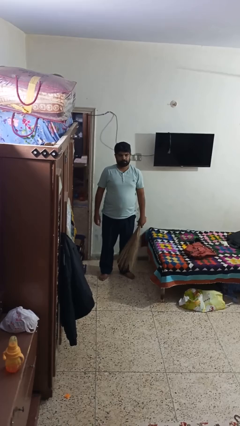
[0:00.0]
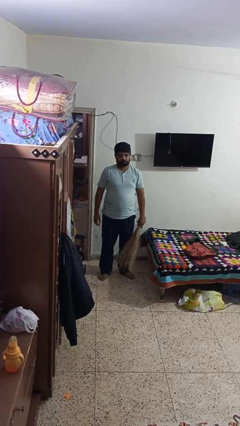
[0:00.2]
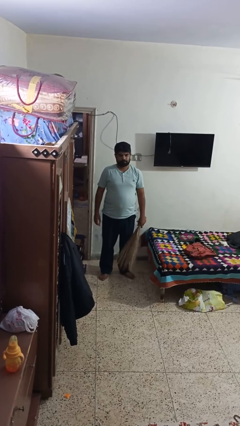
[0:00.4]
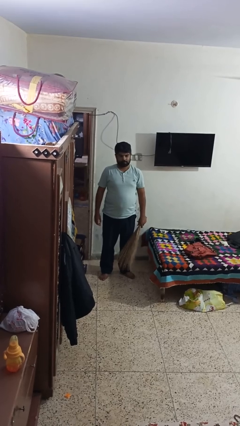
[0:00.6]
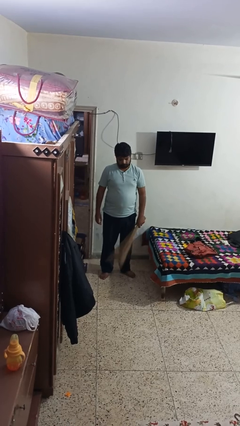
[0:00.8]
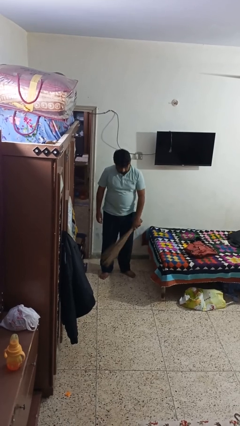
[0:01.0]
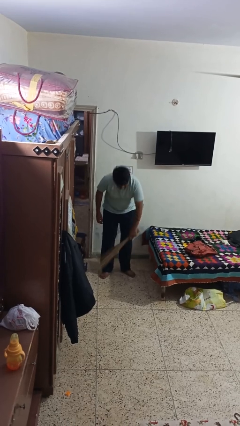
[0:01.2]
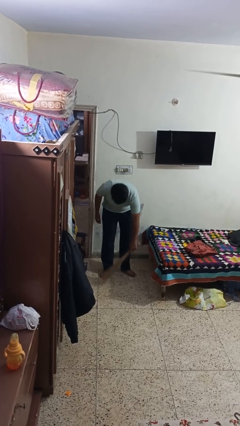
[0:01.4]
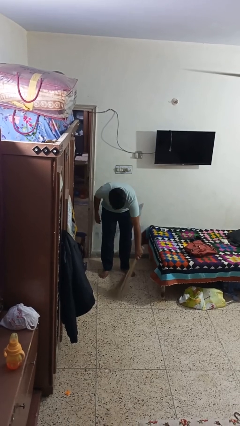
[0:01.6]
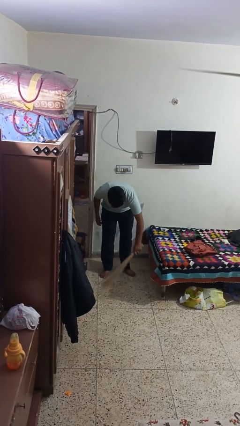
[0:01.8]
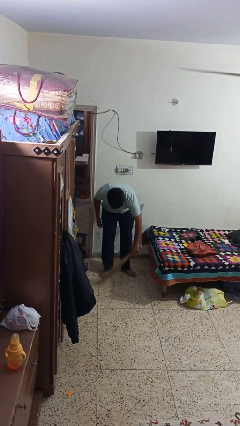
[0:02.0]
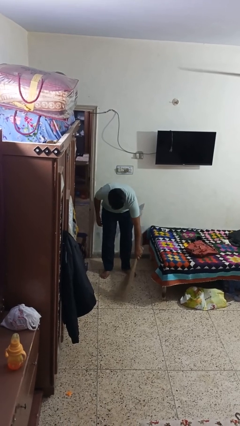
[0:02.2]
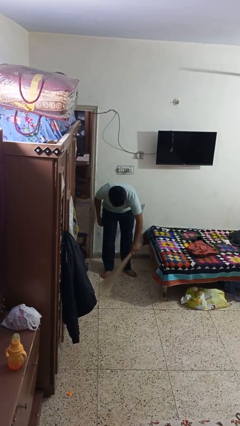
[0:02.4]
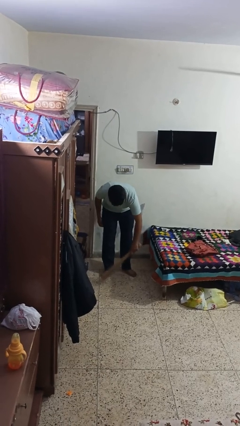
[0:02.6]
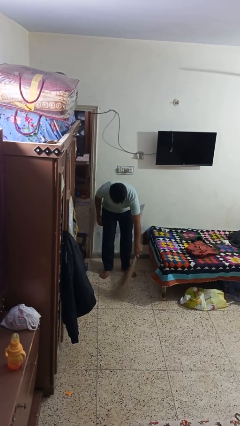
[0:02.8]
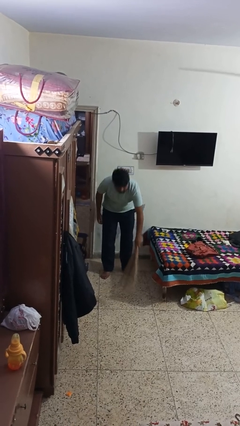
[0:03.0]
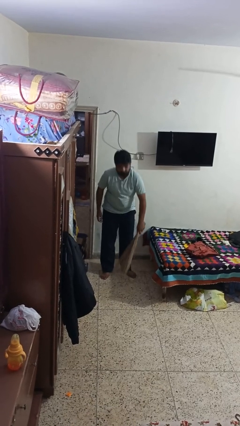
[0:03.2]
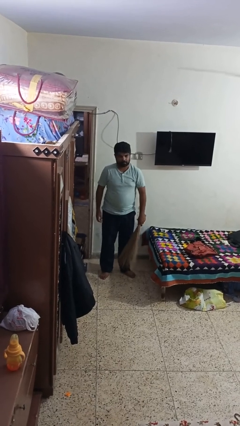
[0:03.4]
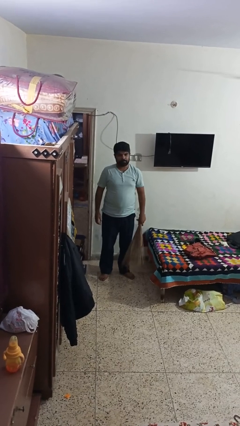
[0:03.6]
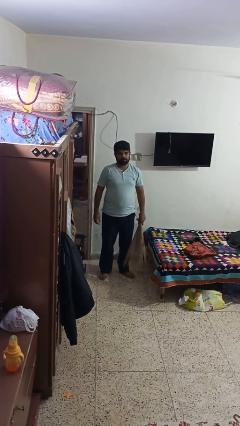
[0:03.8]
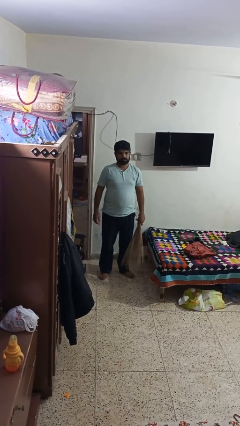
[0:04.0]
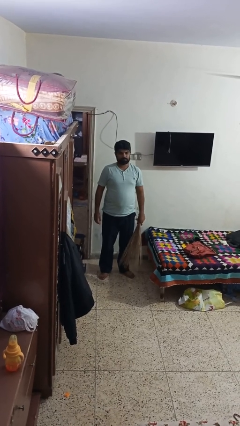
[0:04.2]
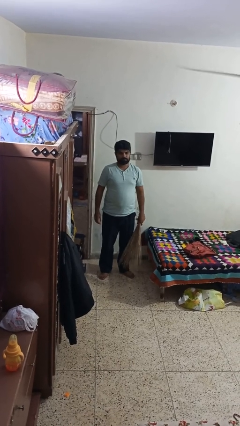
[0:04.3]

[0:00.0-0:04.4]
person sweeps floor

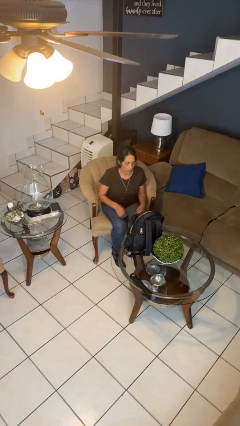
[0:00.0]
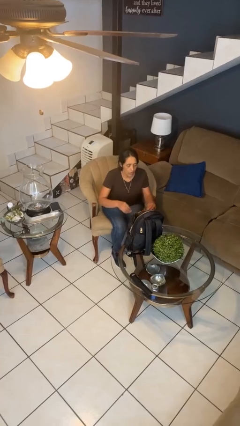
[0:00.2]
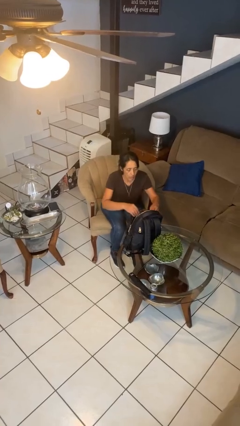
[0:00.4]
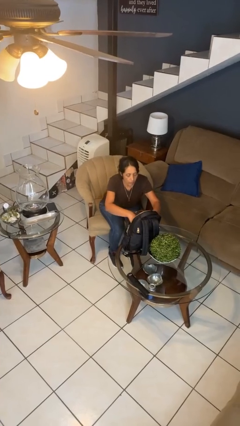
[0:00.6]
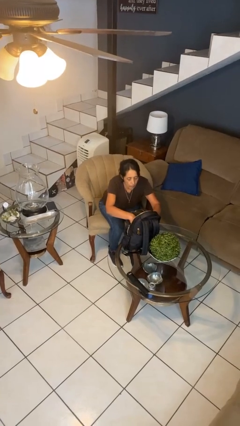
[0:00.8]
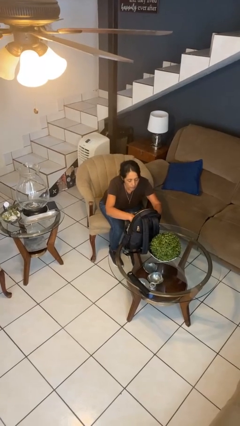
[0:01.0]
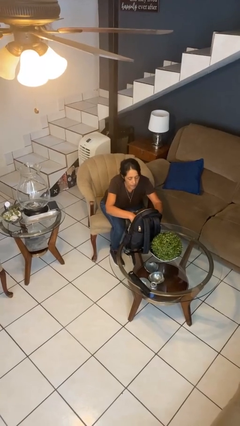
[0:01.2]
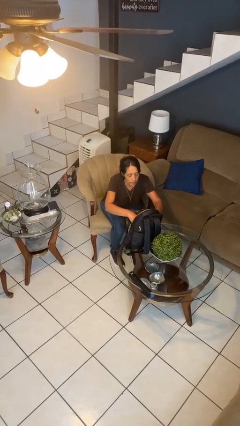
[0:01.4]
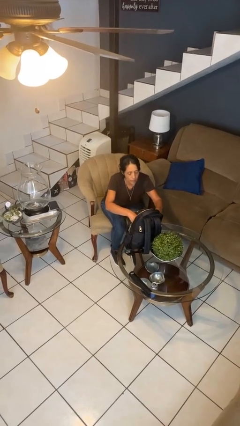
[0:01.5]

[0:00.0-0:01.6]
person searches in backpack

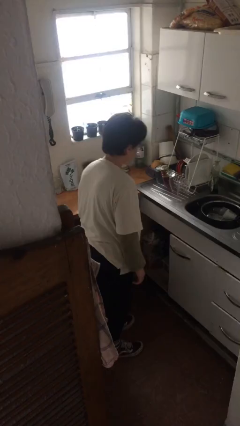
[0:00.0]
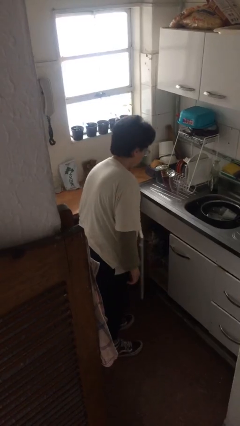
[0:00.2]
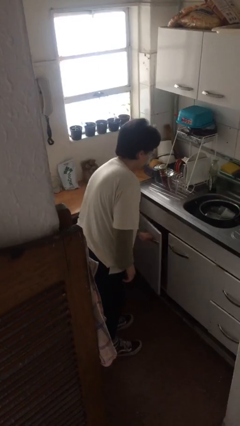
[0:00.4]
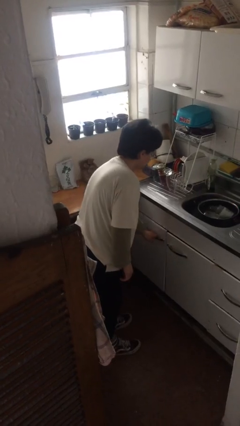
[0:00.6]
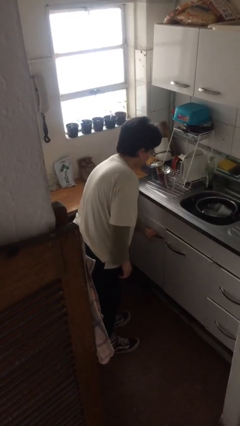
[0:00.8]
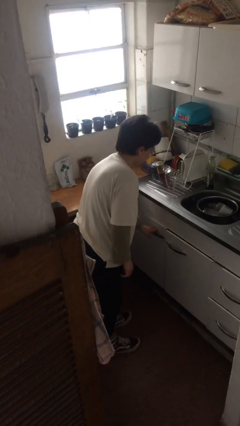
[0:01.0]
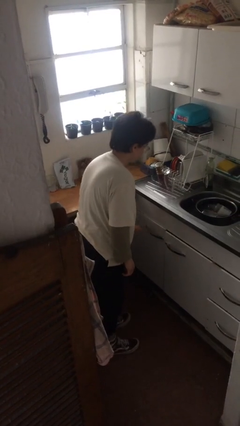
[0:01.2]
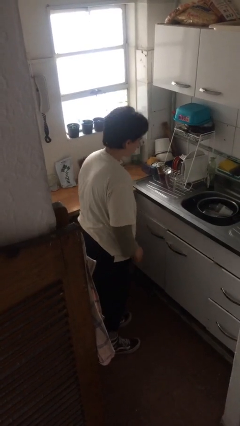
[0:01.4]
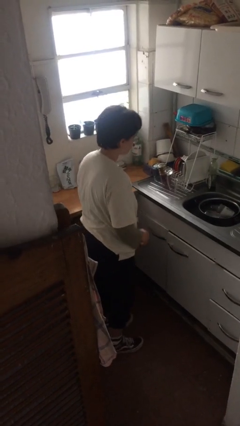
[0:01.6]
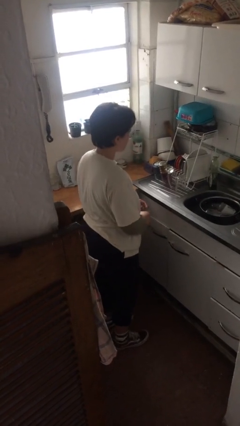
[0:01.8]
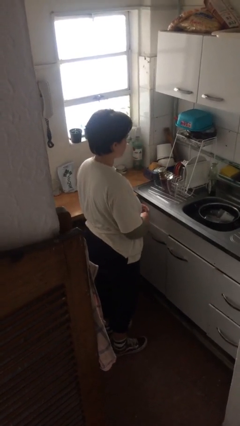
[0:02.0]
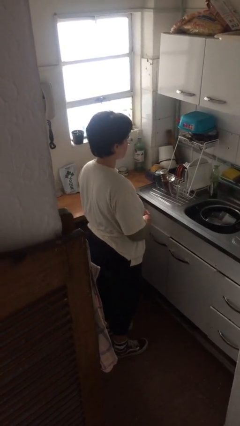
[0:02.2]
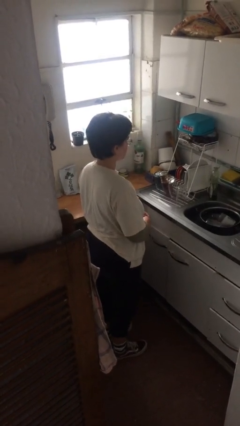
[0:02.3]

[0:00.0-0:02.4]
person closes cabinet

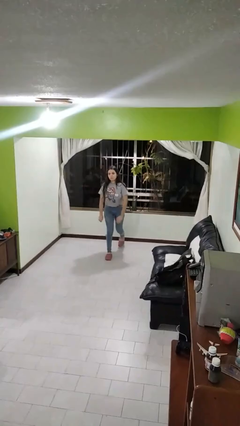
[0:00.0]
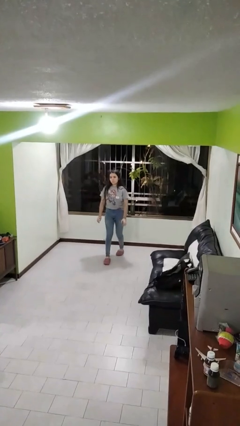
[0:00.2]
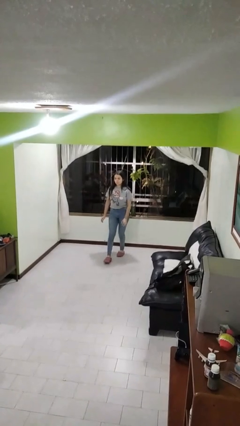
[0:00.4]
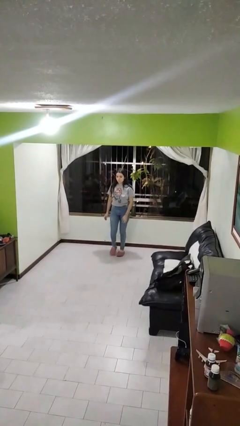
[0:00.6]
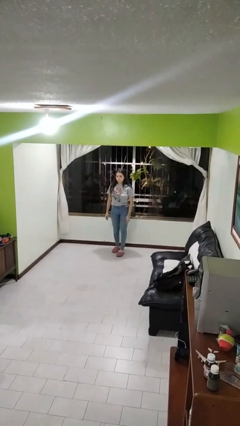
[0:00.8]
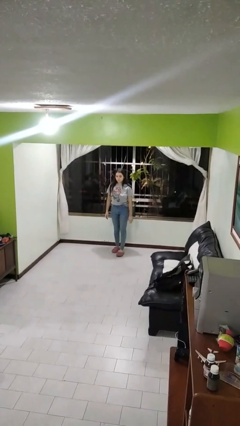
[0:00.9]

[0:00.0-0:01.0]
person stands up from floor

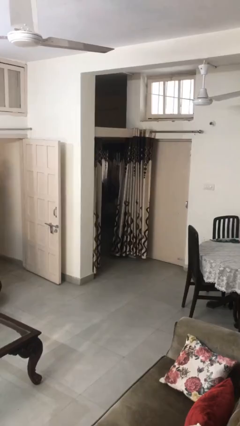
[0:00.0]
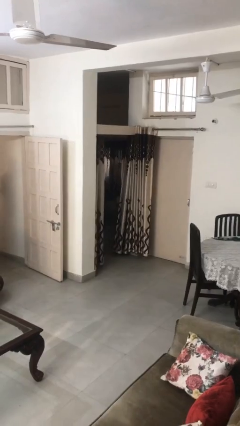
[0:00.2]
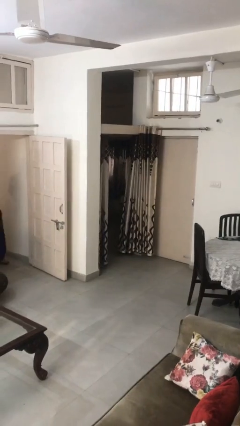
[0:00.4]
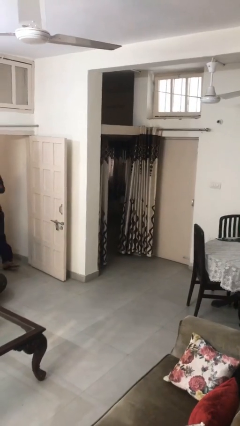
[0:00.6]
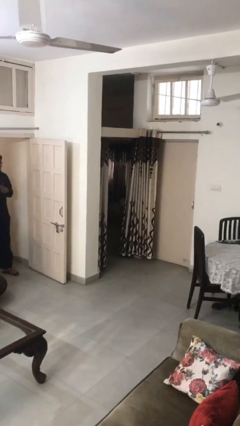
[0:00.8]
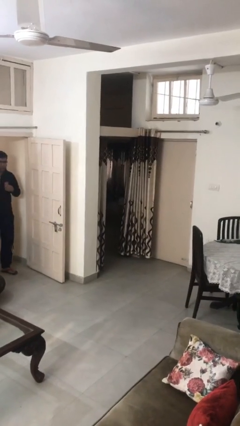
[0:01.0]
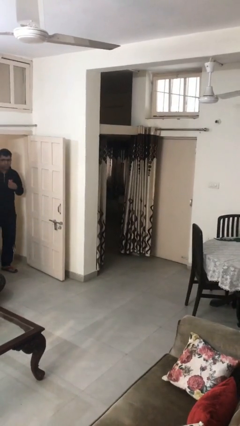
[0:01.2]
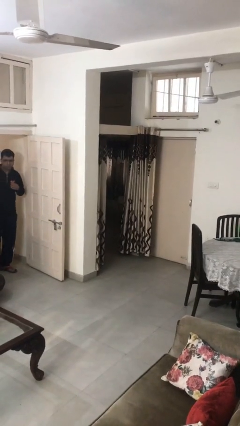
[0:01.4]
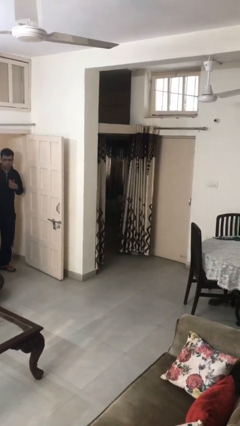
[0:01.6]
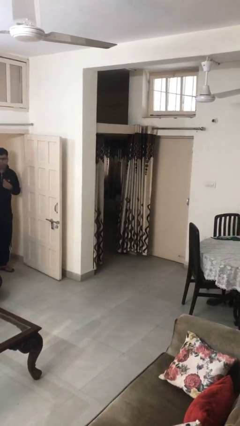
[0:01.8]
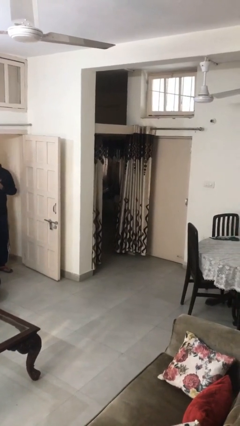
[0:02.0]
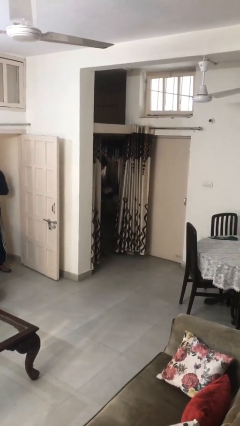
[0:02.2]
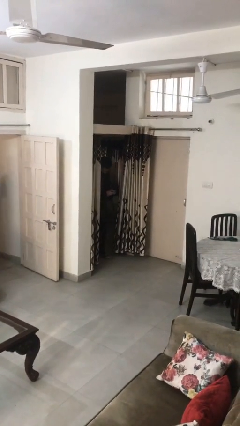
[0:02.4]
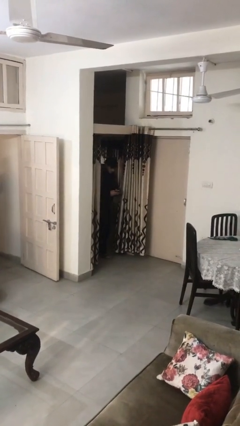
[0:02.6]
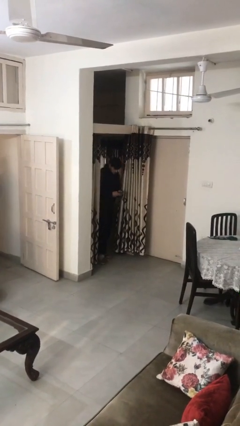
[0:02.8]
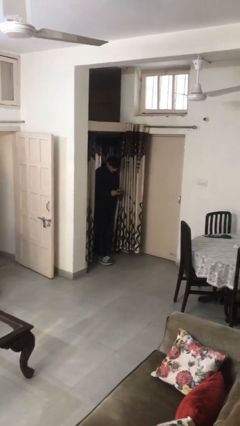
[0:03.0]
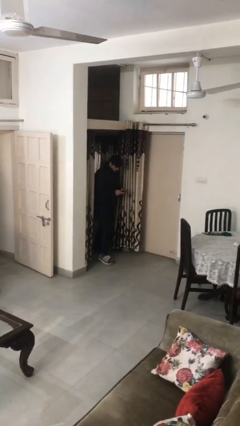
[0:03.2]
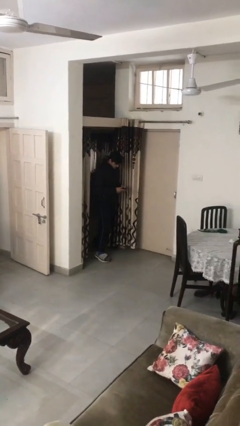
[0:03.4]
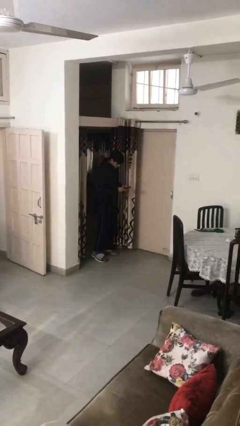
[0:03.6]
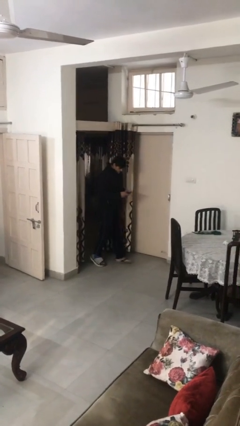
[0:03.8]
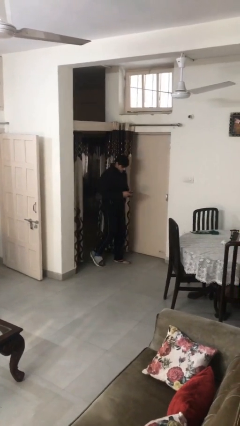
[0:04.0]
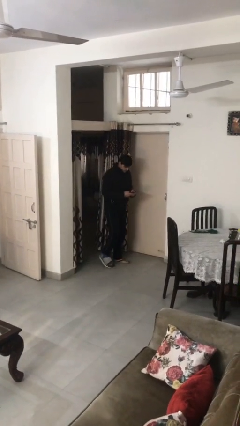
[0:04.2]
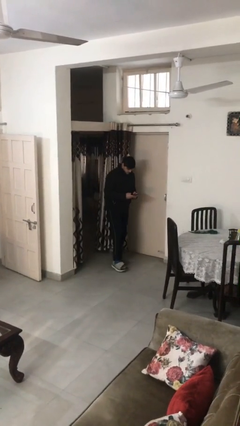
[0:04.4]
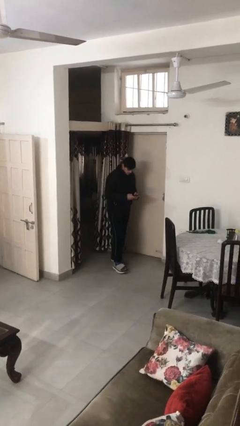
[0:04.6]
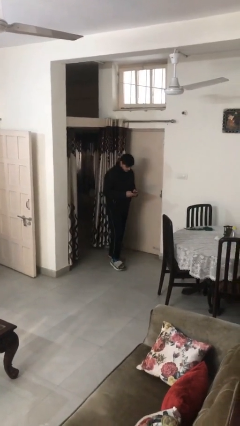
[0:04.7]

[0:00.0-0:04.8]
person enters scene through structure

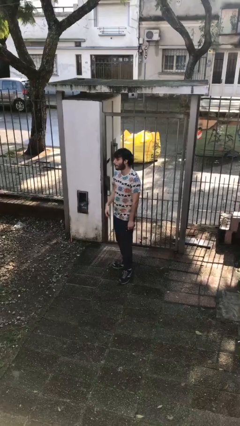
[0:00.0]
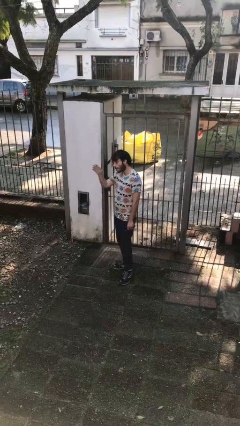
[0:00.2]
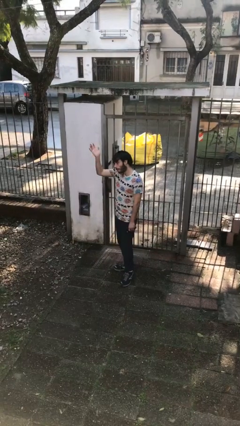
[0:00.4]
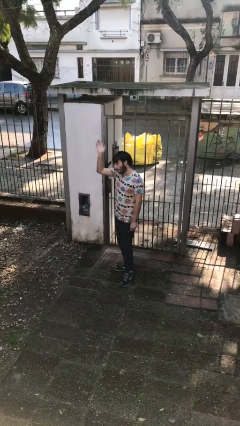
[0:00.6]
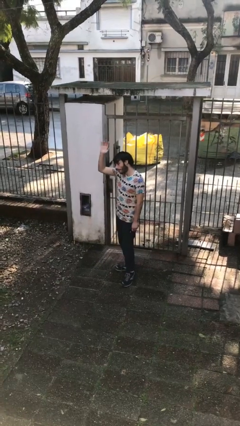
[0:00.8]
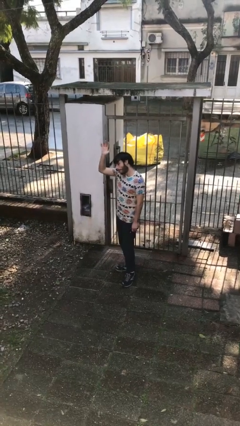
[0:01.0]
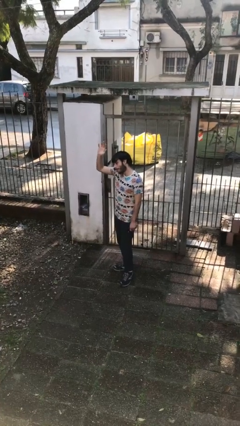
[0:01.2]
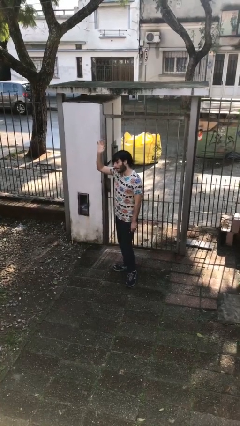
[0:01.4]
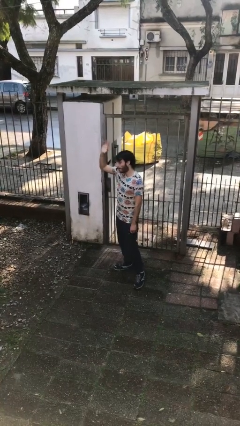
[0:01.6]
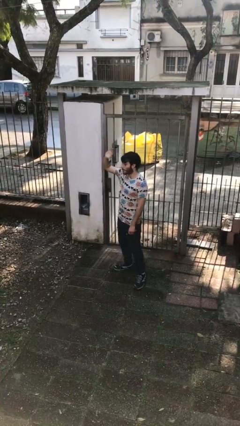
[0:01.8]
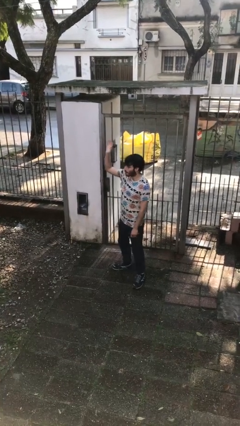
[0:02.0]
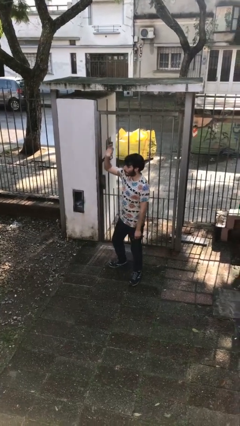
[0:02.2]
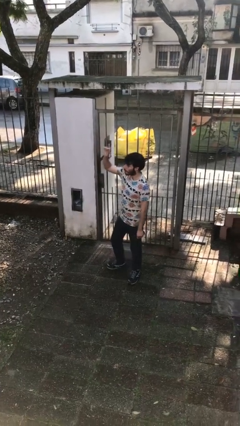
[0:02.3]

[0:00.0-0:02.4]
person waves at person

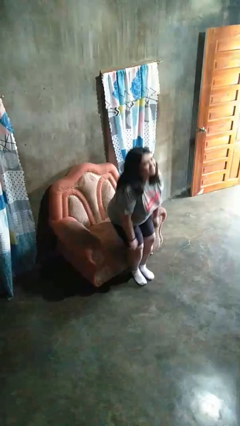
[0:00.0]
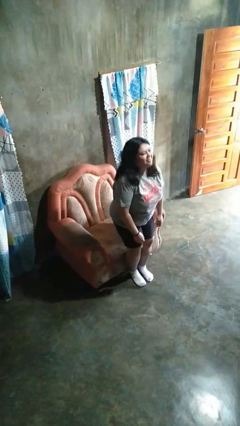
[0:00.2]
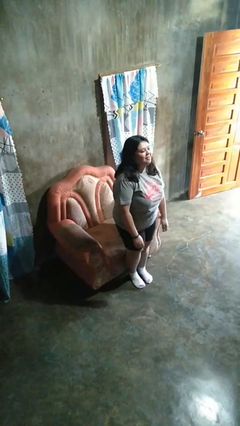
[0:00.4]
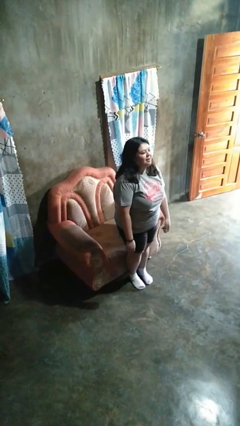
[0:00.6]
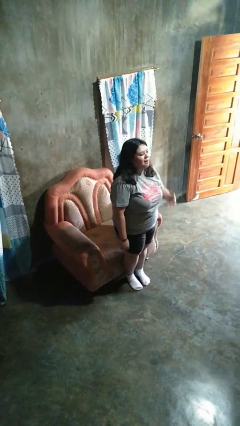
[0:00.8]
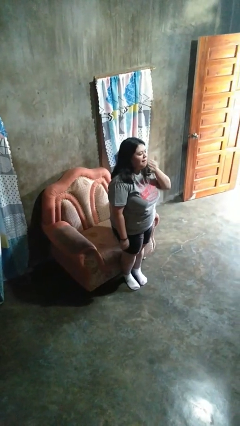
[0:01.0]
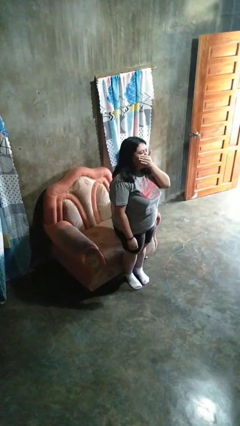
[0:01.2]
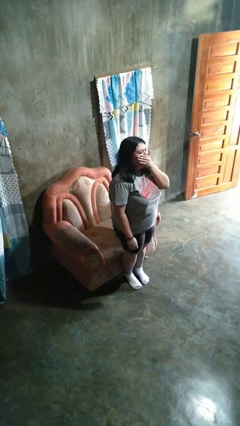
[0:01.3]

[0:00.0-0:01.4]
person yawns
